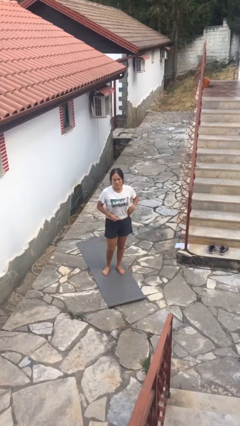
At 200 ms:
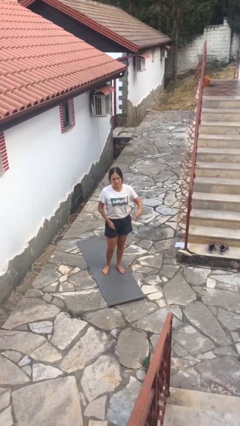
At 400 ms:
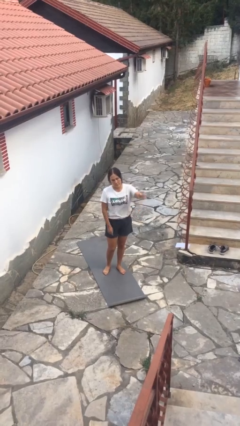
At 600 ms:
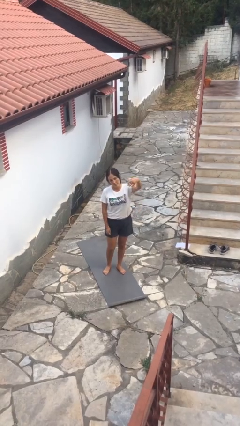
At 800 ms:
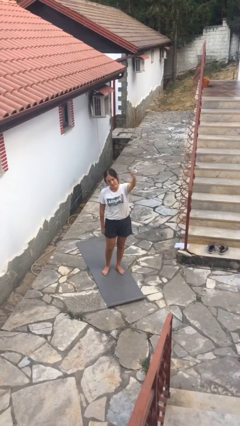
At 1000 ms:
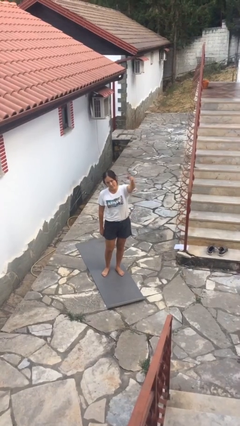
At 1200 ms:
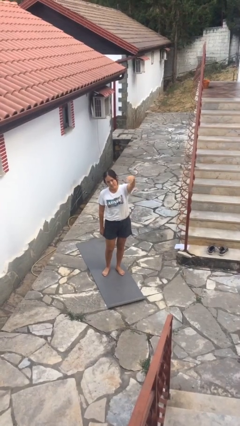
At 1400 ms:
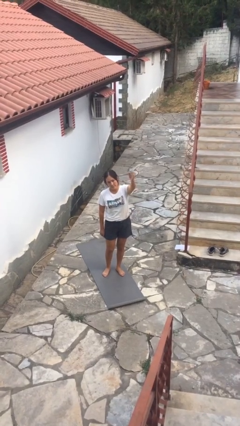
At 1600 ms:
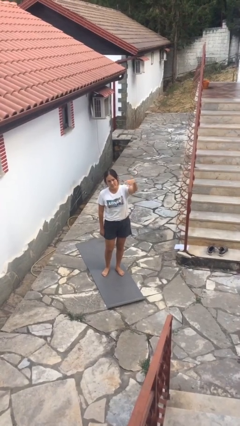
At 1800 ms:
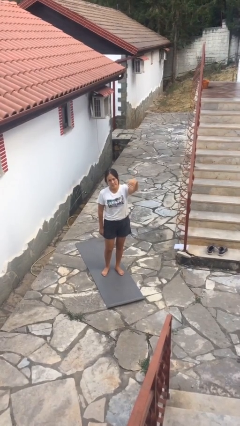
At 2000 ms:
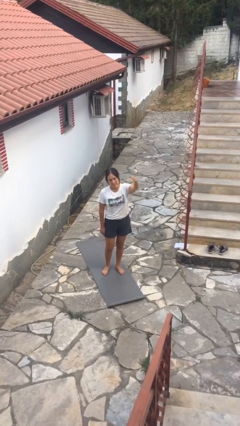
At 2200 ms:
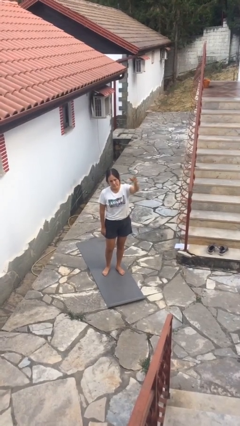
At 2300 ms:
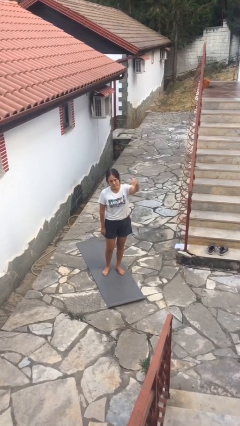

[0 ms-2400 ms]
person gestures come here

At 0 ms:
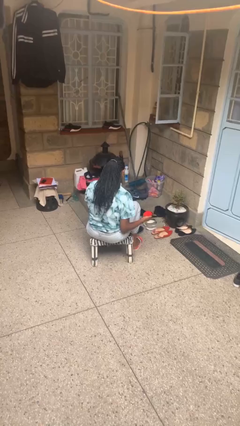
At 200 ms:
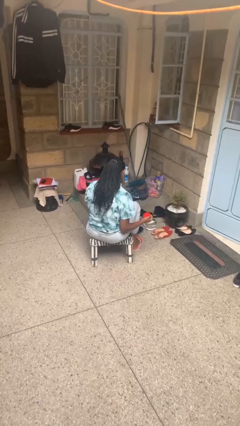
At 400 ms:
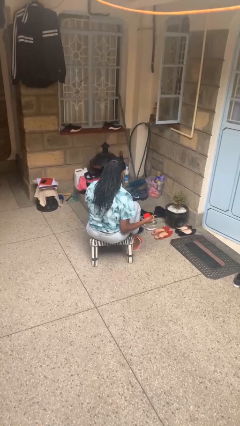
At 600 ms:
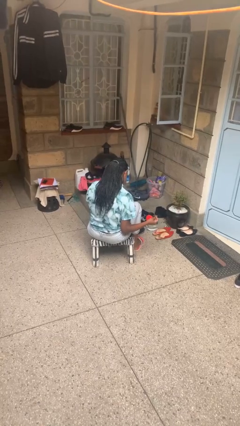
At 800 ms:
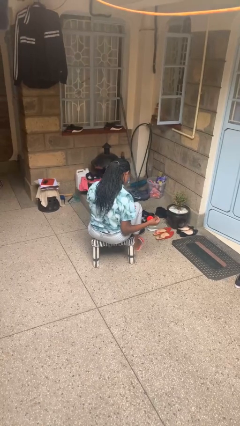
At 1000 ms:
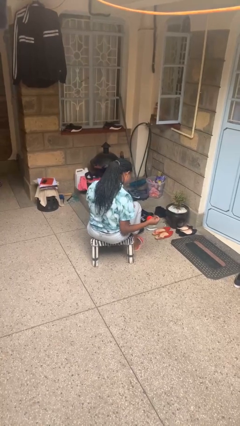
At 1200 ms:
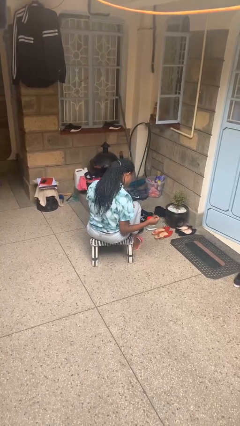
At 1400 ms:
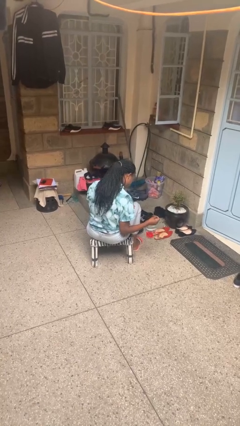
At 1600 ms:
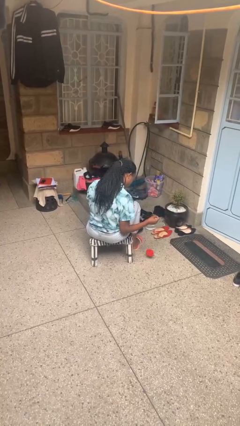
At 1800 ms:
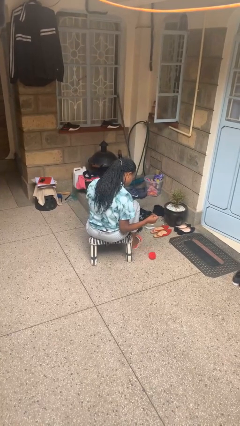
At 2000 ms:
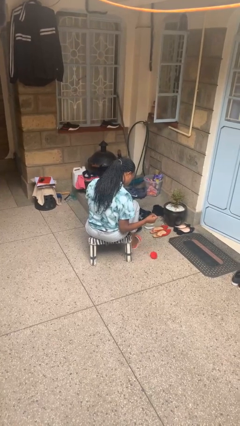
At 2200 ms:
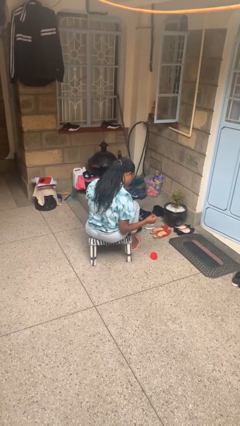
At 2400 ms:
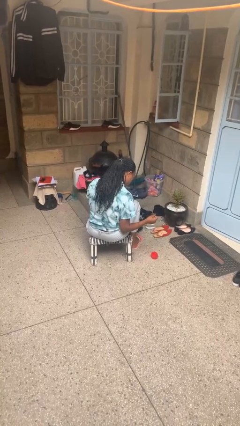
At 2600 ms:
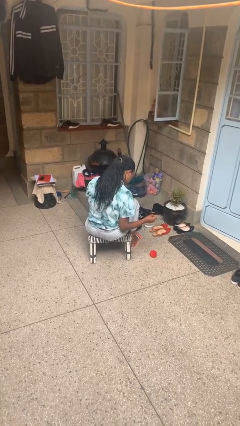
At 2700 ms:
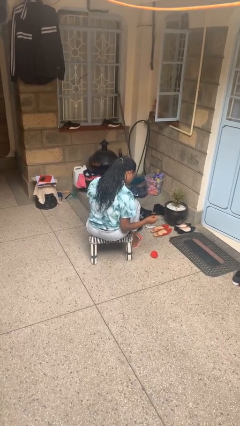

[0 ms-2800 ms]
person drops object

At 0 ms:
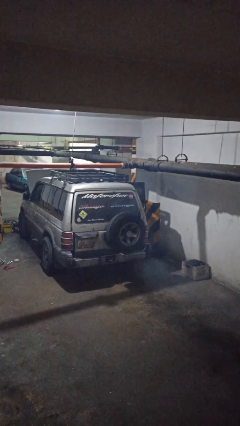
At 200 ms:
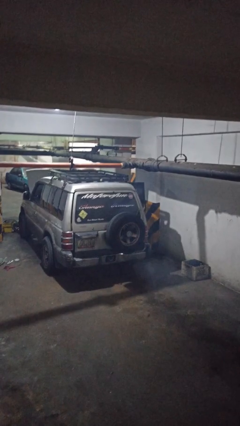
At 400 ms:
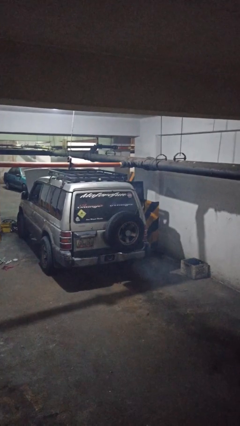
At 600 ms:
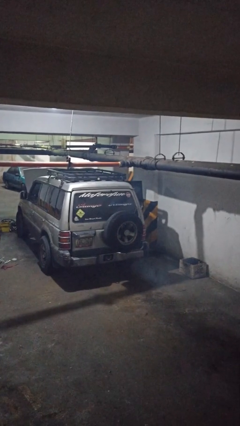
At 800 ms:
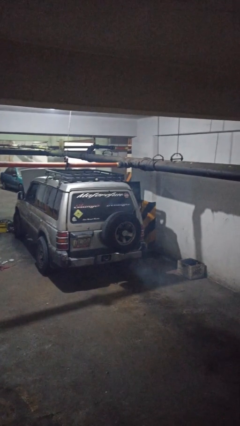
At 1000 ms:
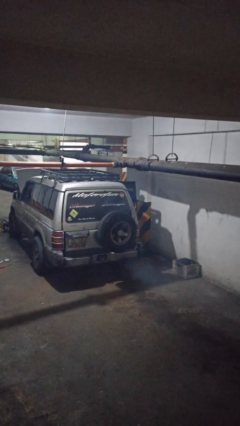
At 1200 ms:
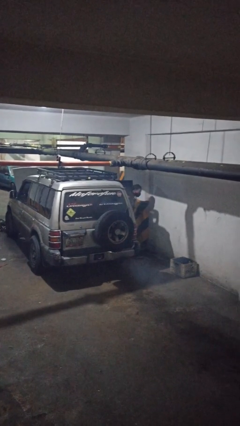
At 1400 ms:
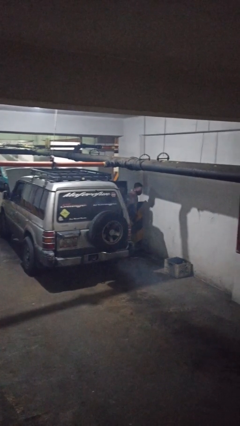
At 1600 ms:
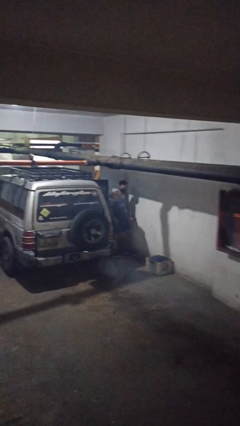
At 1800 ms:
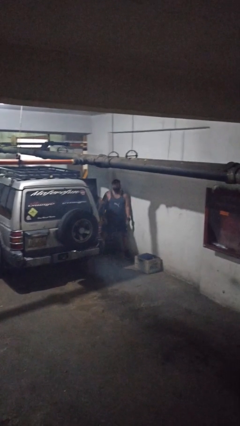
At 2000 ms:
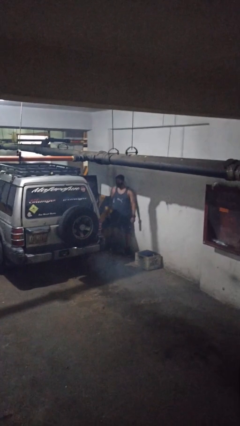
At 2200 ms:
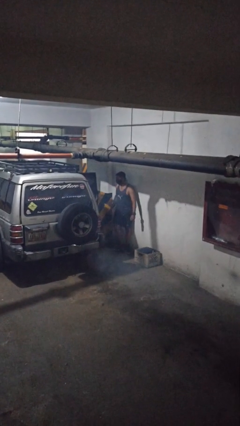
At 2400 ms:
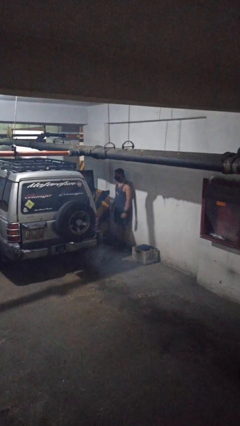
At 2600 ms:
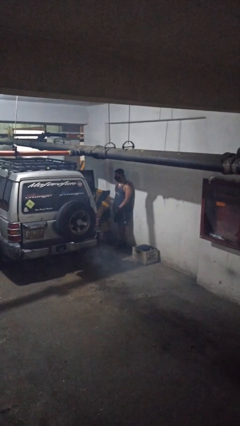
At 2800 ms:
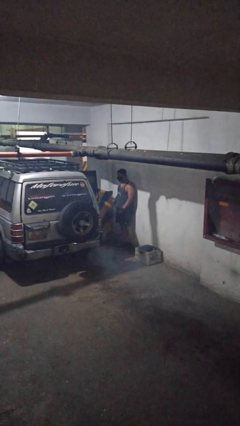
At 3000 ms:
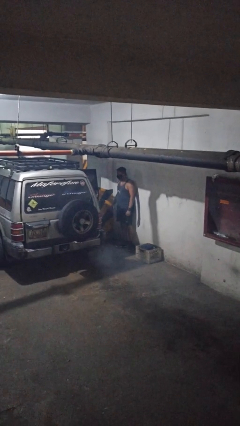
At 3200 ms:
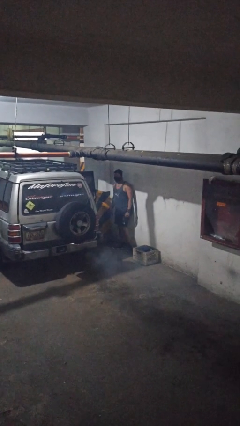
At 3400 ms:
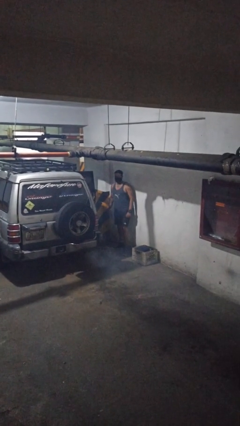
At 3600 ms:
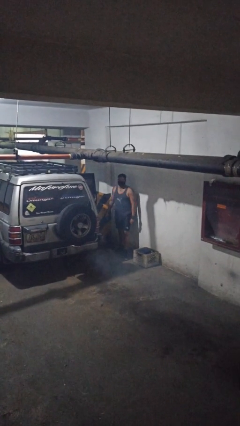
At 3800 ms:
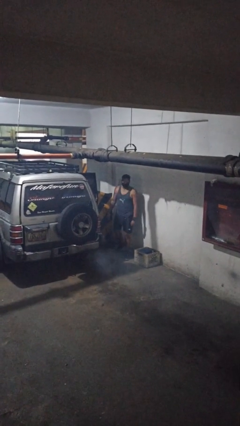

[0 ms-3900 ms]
person exits car

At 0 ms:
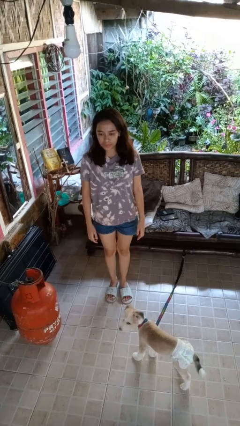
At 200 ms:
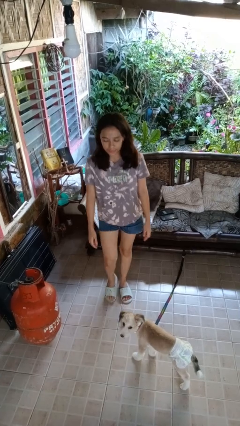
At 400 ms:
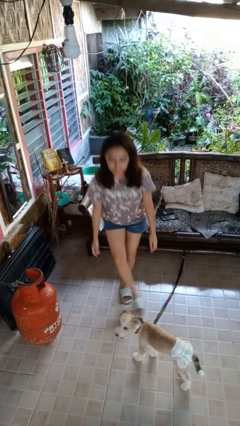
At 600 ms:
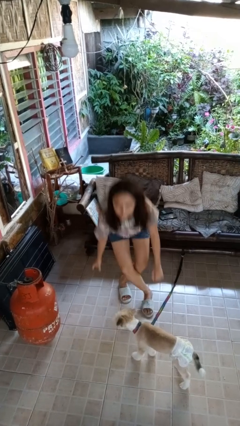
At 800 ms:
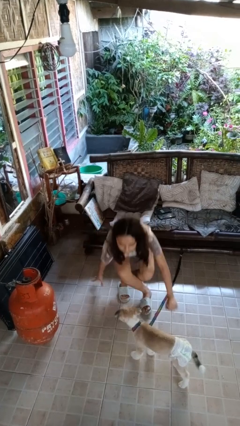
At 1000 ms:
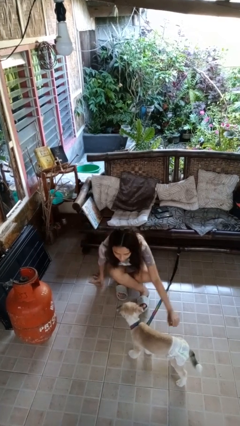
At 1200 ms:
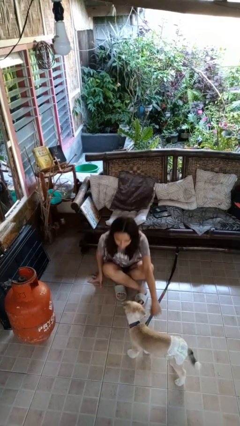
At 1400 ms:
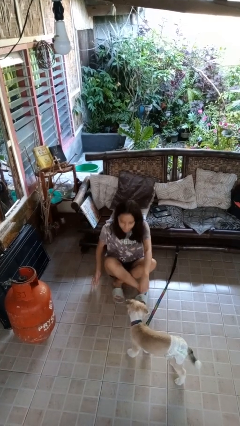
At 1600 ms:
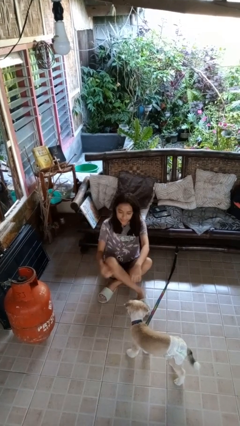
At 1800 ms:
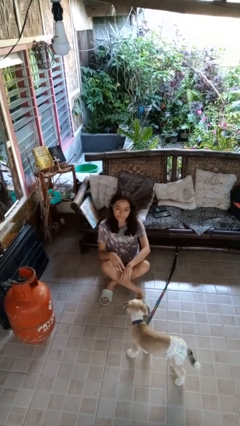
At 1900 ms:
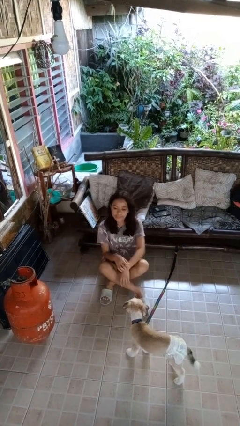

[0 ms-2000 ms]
person sits crisscross

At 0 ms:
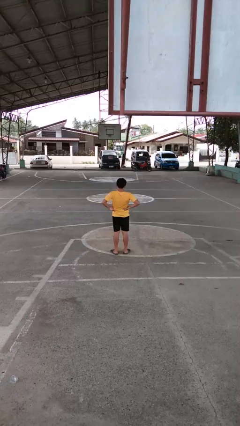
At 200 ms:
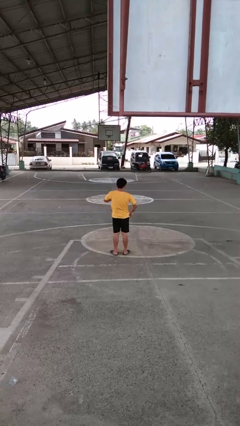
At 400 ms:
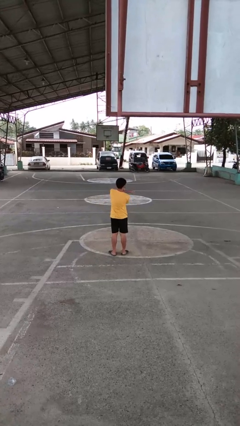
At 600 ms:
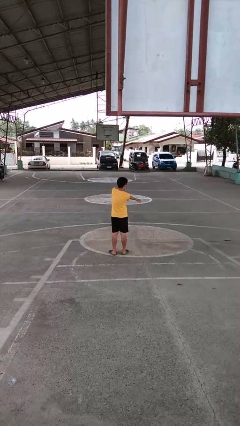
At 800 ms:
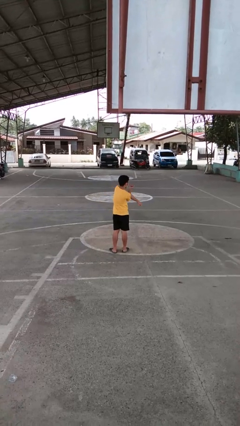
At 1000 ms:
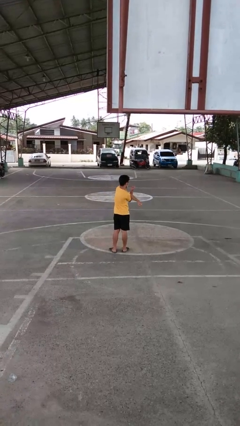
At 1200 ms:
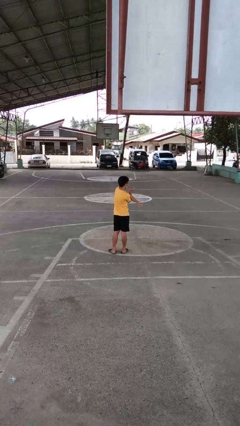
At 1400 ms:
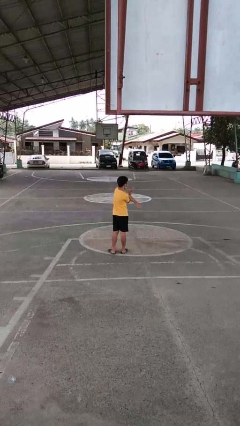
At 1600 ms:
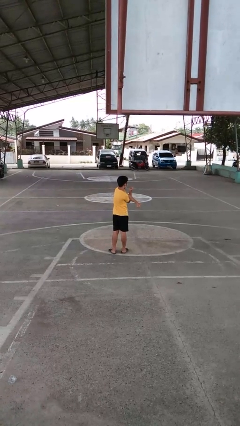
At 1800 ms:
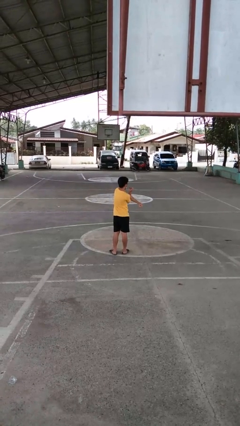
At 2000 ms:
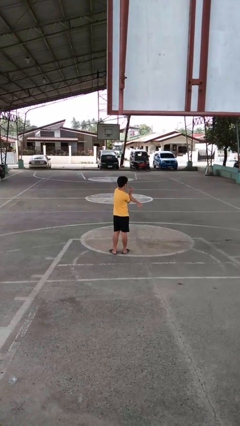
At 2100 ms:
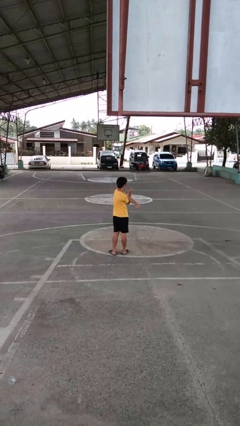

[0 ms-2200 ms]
person stretches arms to side

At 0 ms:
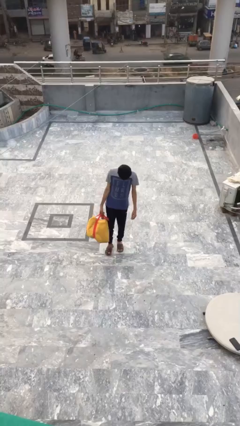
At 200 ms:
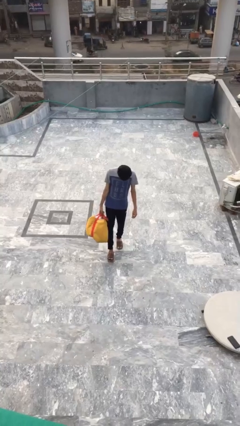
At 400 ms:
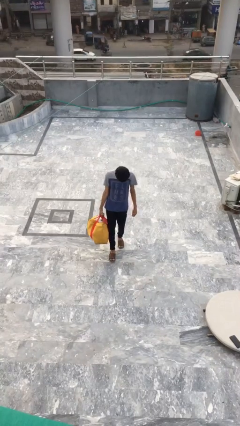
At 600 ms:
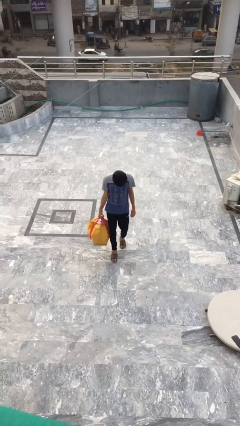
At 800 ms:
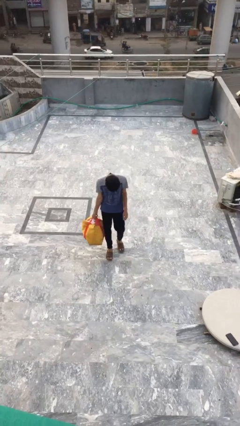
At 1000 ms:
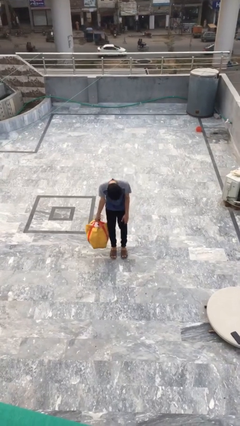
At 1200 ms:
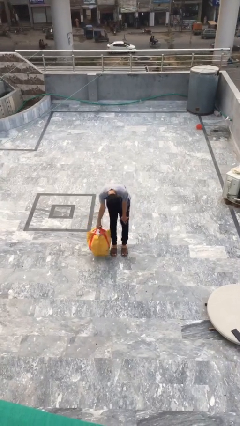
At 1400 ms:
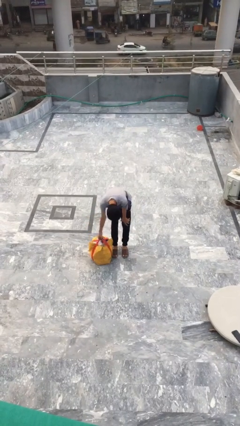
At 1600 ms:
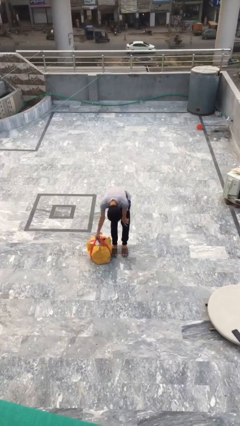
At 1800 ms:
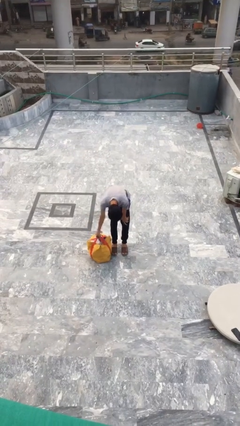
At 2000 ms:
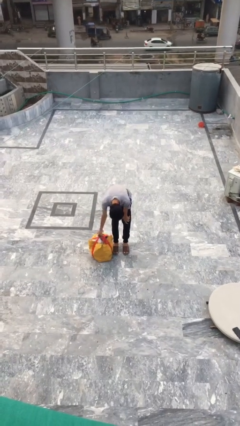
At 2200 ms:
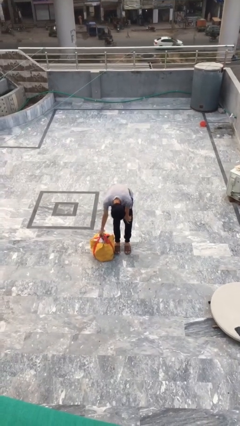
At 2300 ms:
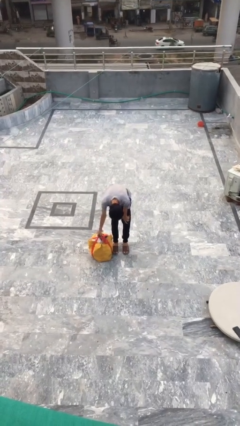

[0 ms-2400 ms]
person puts down object on floor

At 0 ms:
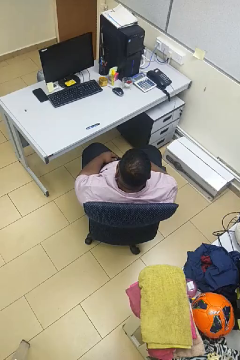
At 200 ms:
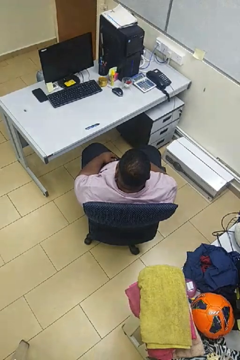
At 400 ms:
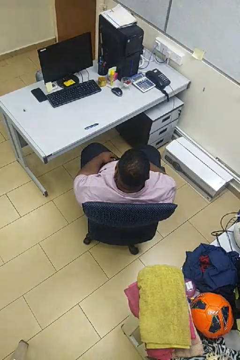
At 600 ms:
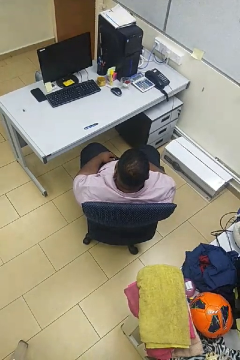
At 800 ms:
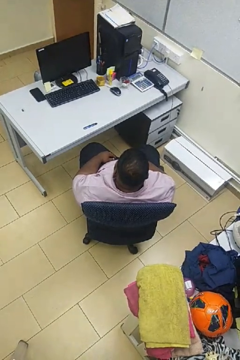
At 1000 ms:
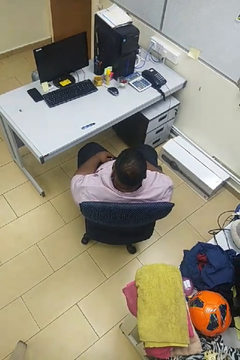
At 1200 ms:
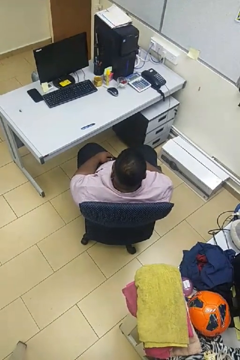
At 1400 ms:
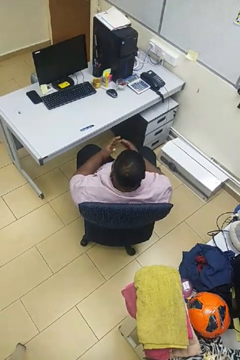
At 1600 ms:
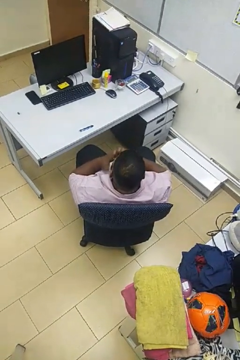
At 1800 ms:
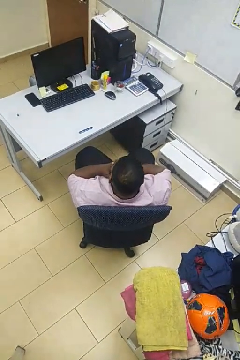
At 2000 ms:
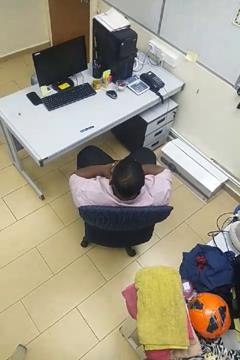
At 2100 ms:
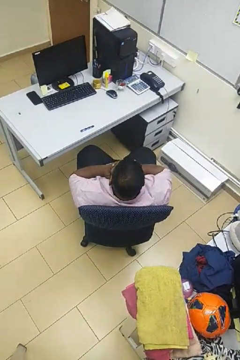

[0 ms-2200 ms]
person covers face with hands
